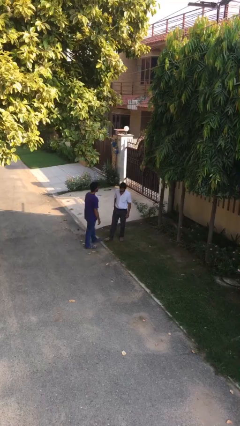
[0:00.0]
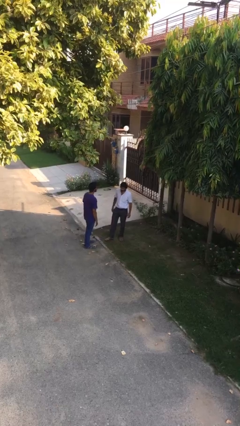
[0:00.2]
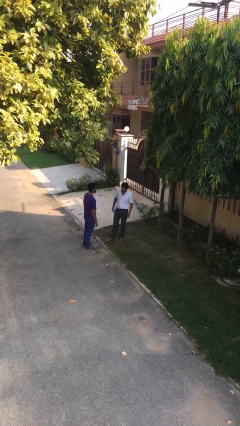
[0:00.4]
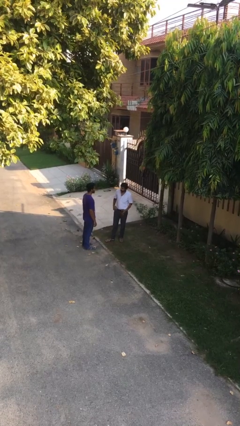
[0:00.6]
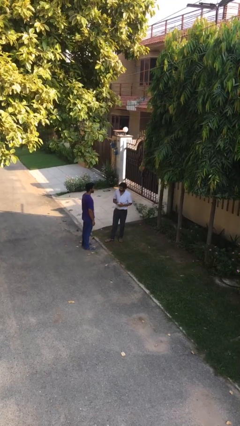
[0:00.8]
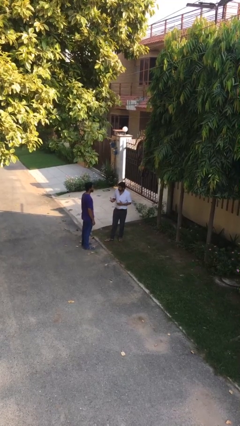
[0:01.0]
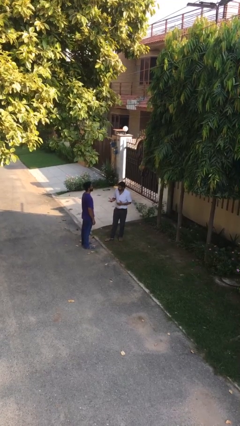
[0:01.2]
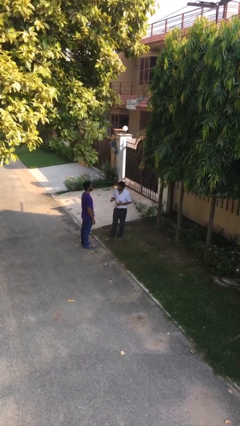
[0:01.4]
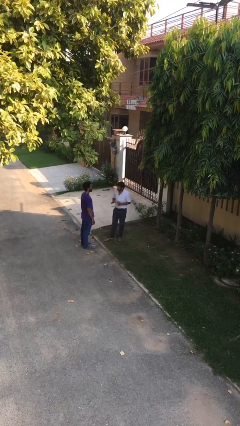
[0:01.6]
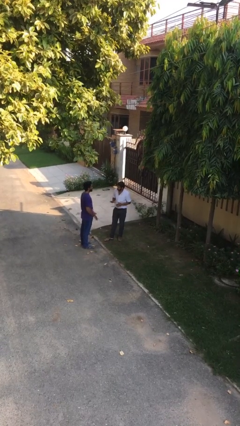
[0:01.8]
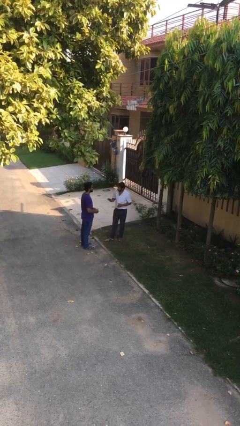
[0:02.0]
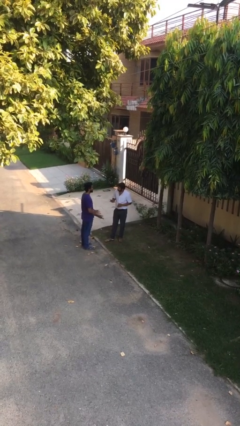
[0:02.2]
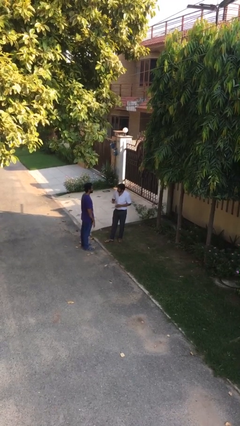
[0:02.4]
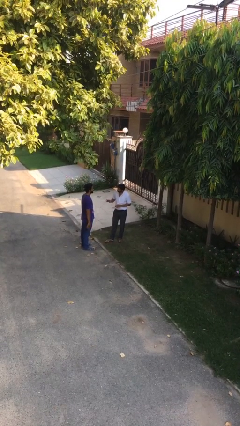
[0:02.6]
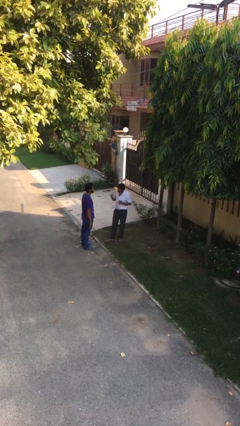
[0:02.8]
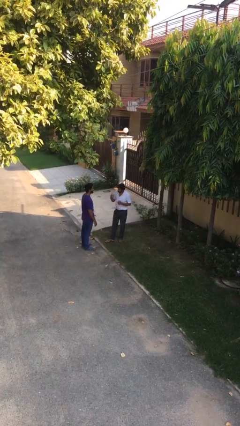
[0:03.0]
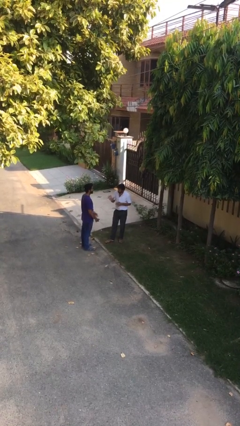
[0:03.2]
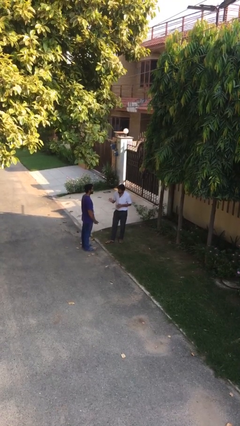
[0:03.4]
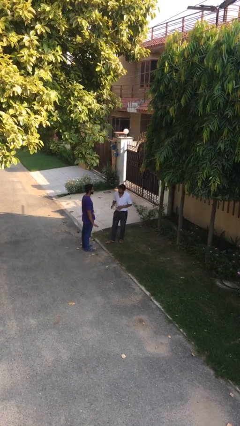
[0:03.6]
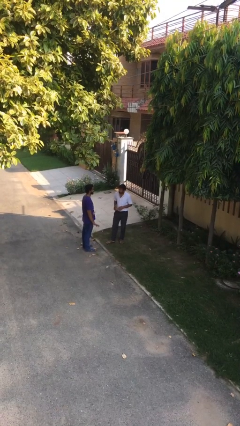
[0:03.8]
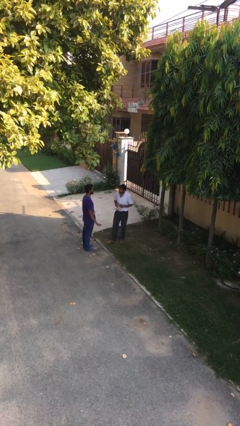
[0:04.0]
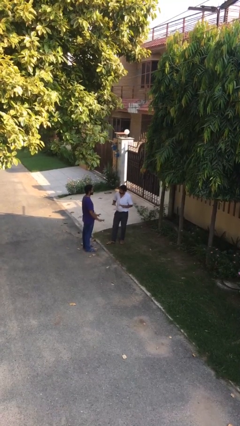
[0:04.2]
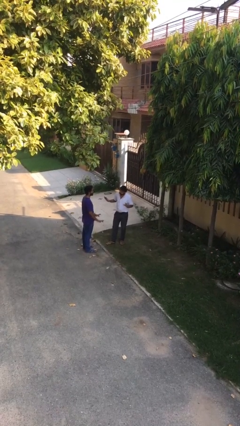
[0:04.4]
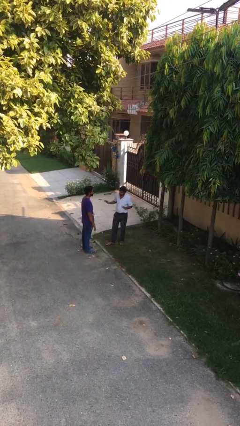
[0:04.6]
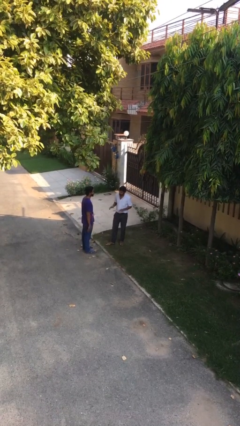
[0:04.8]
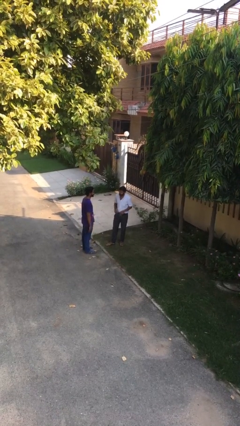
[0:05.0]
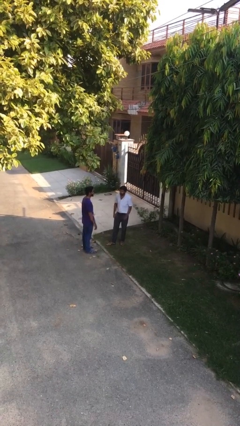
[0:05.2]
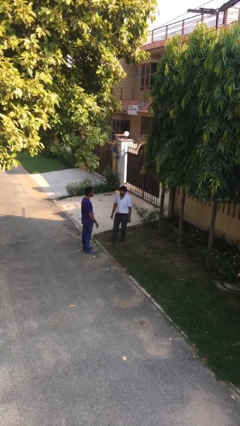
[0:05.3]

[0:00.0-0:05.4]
person talks to person

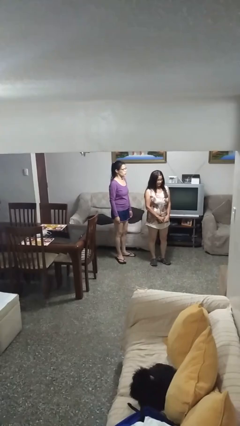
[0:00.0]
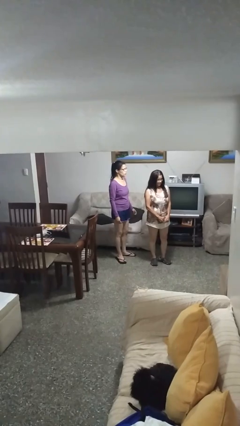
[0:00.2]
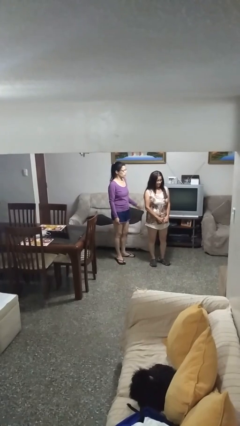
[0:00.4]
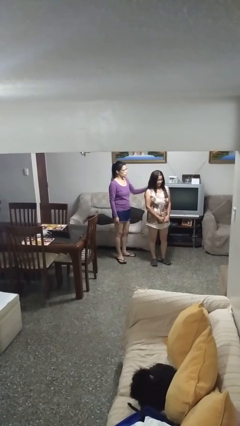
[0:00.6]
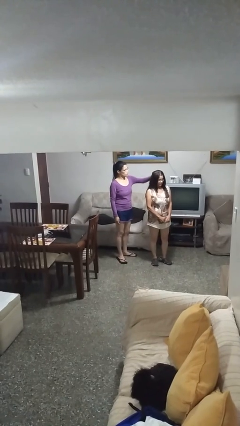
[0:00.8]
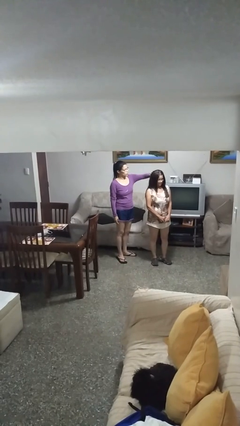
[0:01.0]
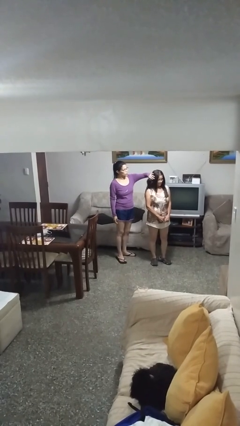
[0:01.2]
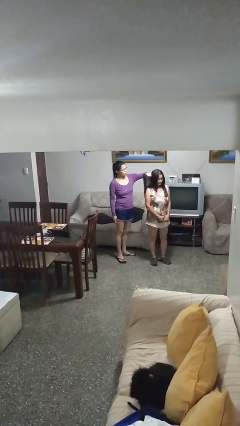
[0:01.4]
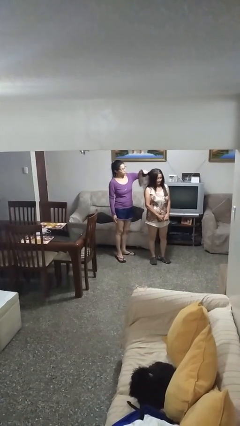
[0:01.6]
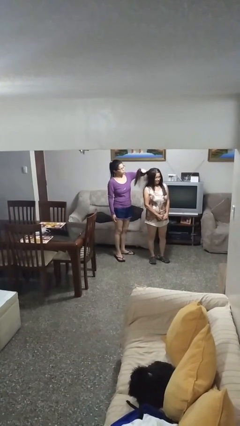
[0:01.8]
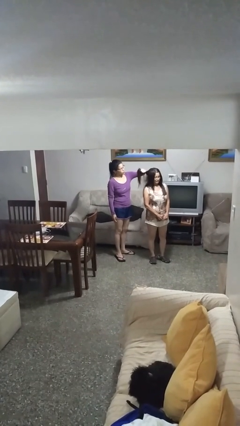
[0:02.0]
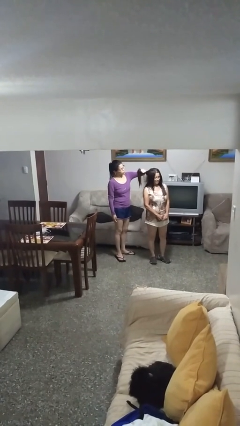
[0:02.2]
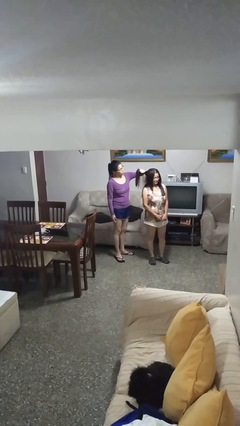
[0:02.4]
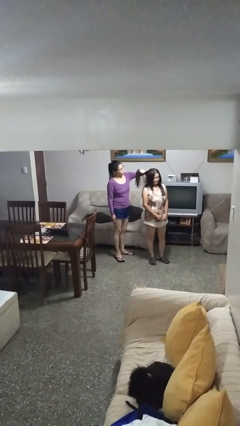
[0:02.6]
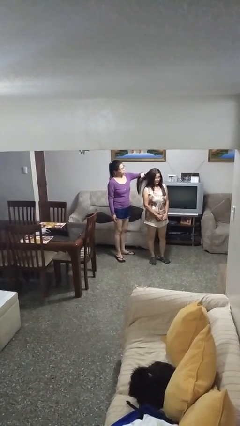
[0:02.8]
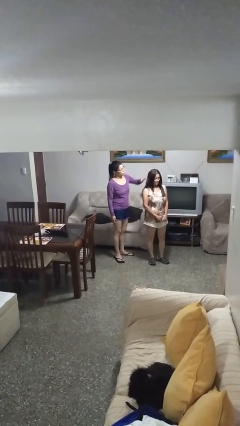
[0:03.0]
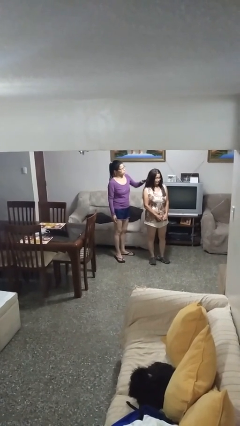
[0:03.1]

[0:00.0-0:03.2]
person grabs person by hair

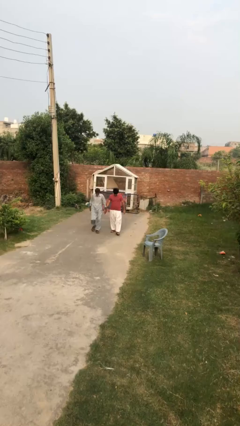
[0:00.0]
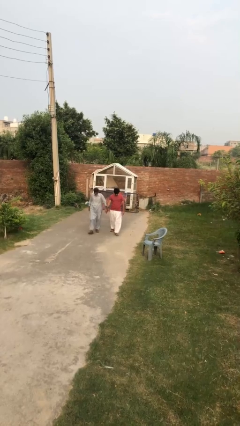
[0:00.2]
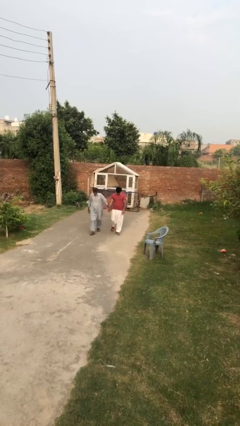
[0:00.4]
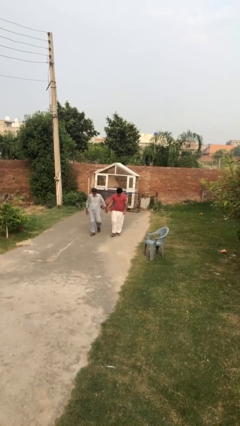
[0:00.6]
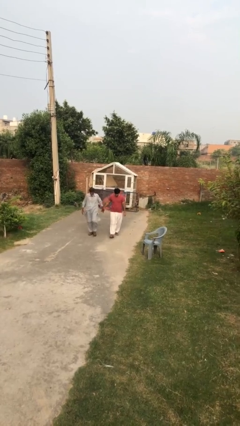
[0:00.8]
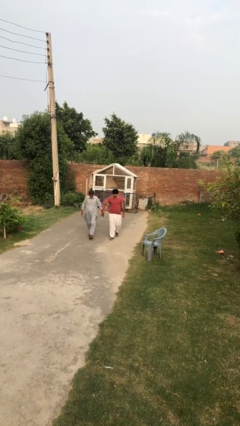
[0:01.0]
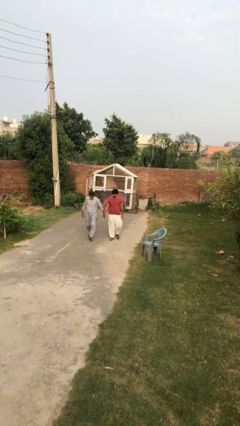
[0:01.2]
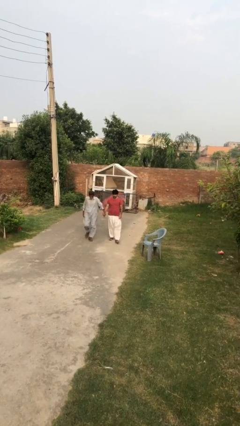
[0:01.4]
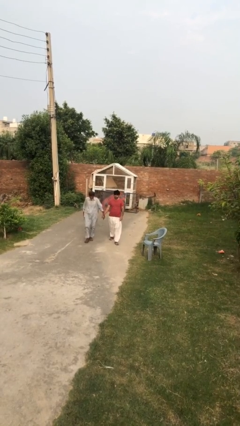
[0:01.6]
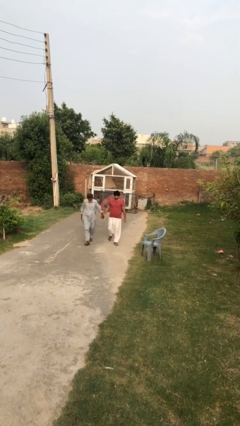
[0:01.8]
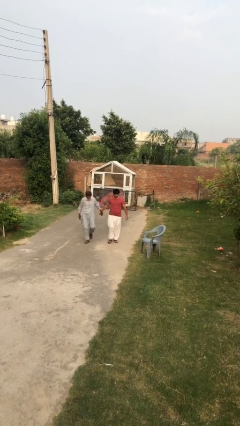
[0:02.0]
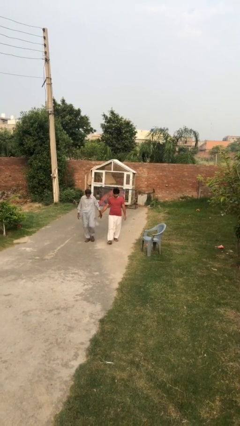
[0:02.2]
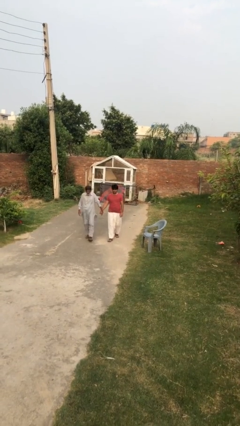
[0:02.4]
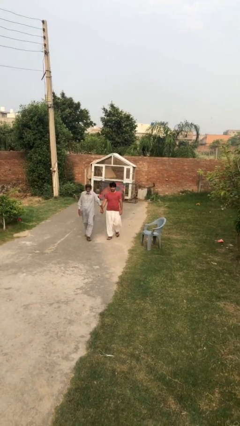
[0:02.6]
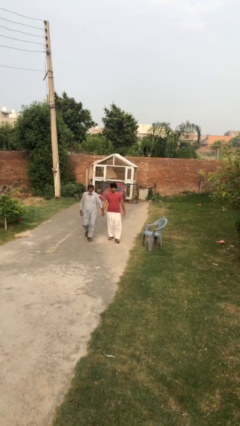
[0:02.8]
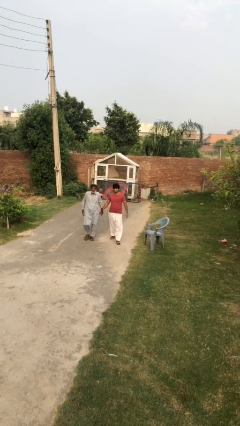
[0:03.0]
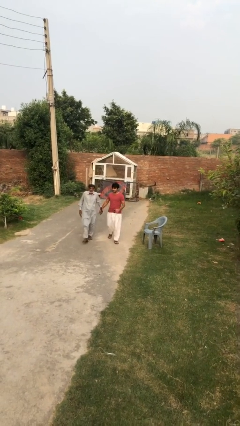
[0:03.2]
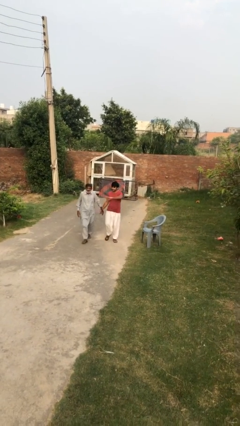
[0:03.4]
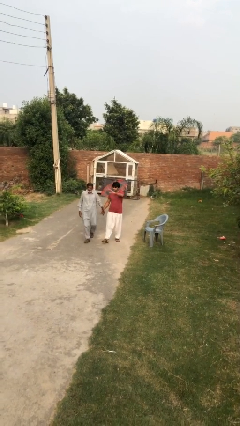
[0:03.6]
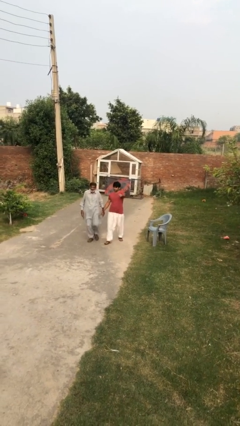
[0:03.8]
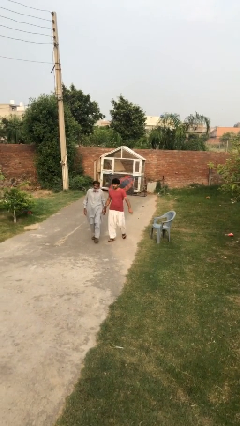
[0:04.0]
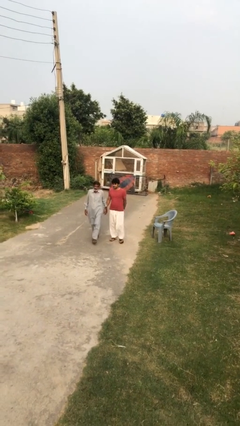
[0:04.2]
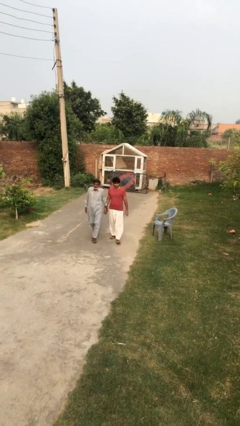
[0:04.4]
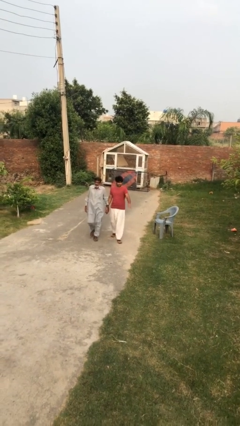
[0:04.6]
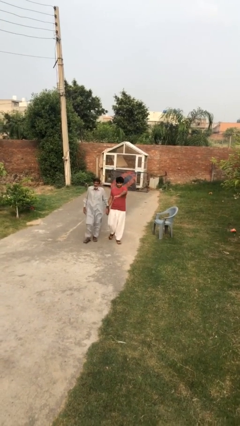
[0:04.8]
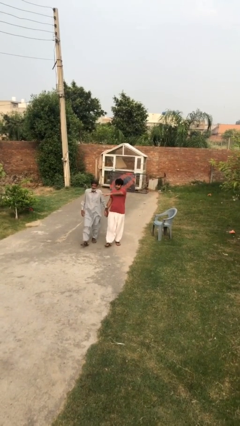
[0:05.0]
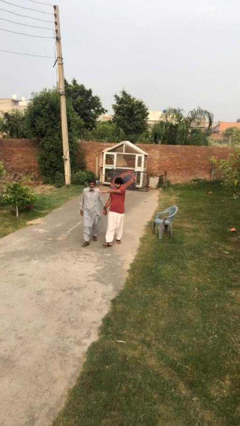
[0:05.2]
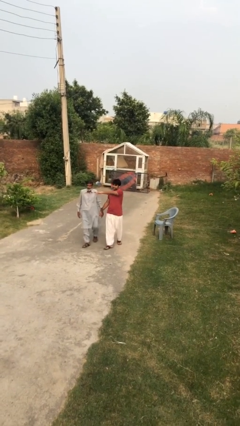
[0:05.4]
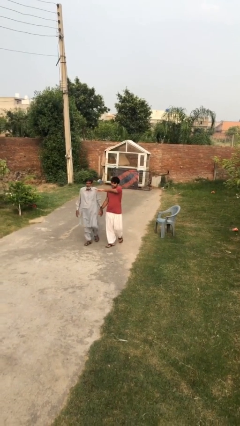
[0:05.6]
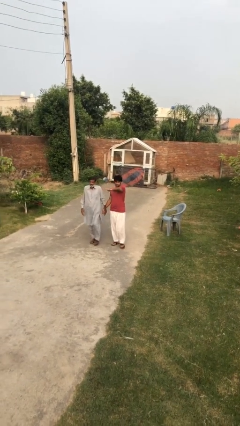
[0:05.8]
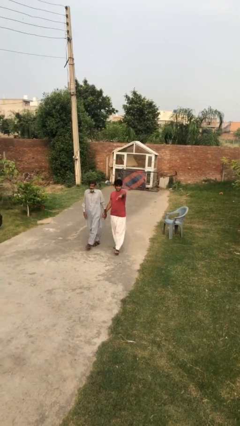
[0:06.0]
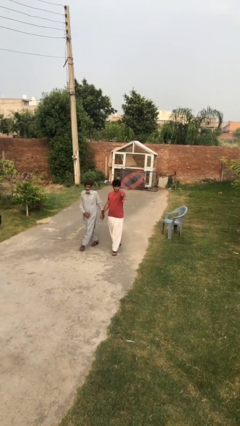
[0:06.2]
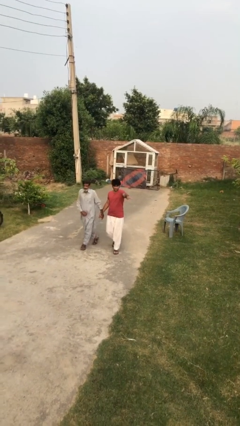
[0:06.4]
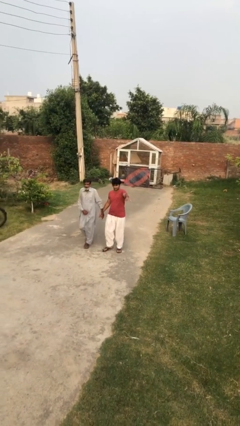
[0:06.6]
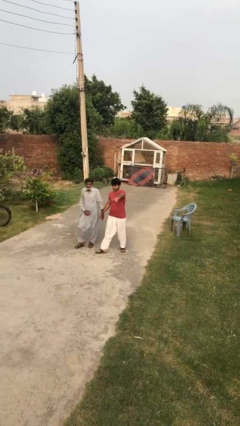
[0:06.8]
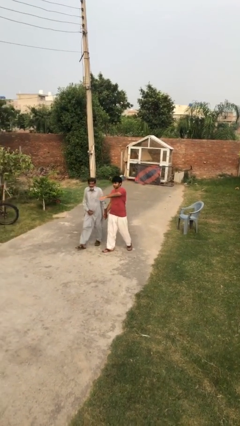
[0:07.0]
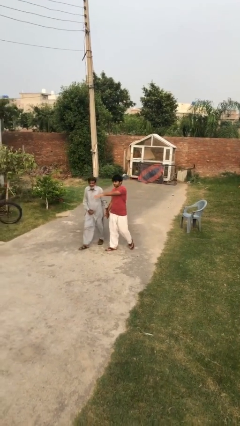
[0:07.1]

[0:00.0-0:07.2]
person holds hand

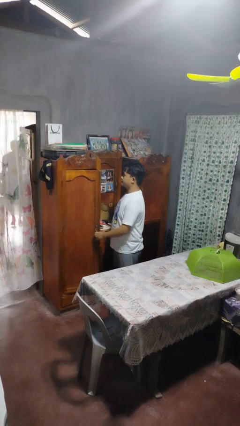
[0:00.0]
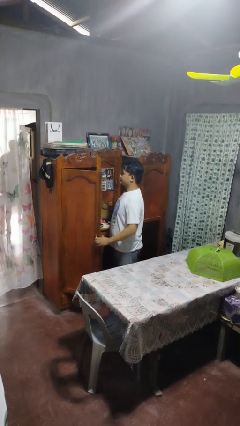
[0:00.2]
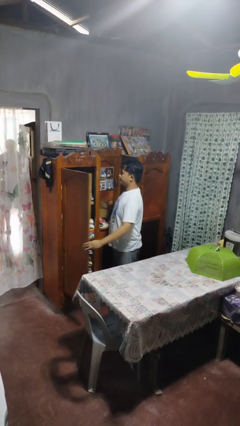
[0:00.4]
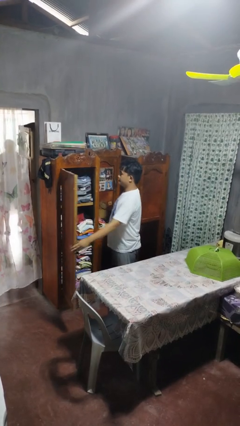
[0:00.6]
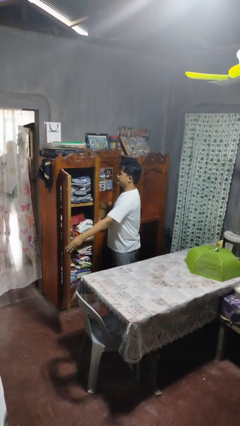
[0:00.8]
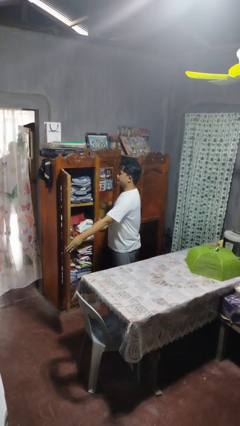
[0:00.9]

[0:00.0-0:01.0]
person opens closet door

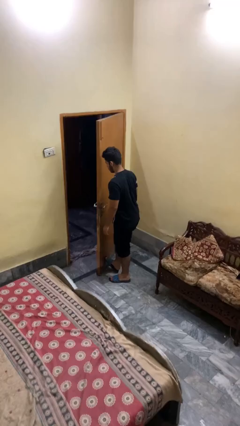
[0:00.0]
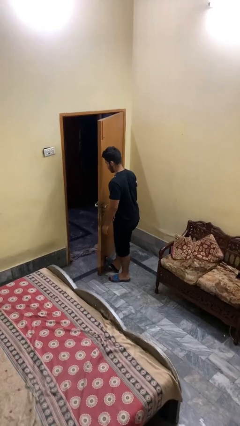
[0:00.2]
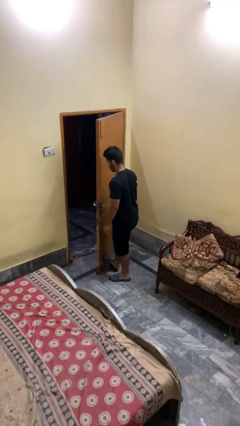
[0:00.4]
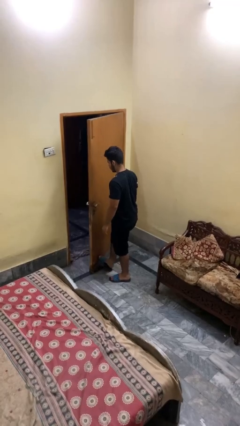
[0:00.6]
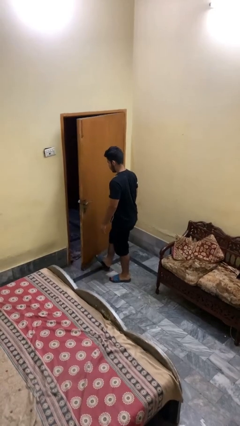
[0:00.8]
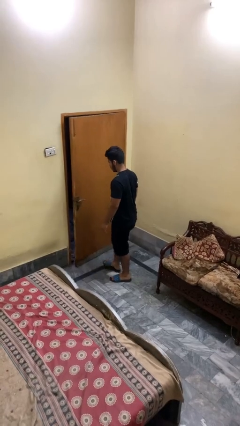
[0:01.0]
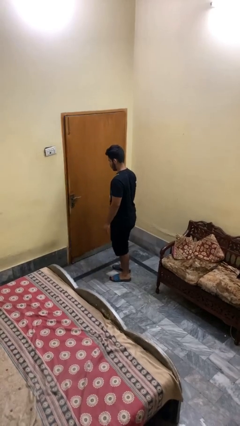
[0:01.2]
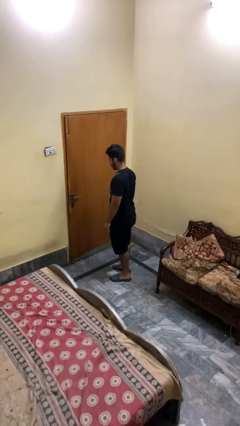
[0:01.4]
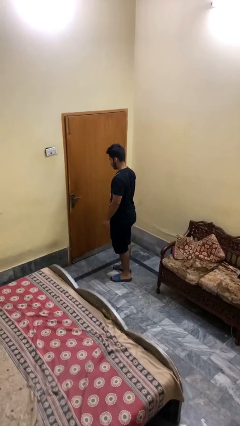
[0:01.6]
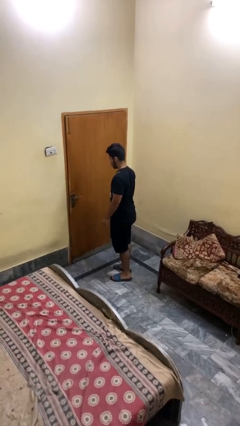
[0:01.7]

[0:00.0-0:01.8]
person closes door with foot
